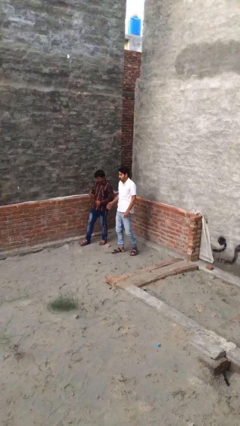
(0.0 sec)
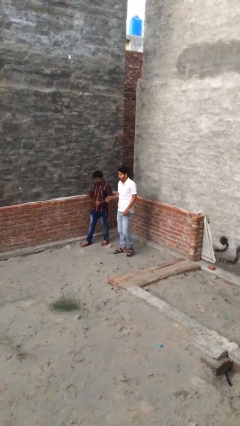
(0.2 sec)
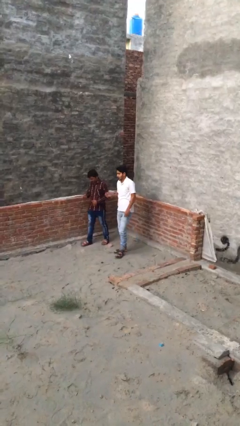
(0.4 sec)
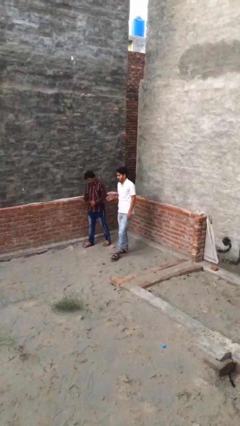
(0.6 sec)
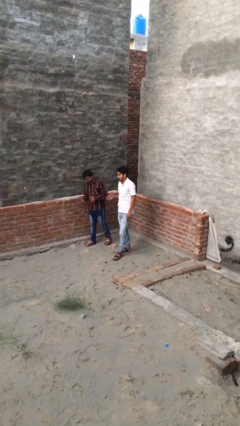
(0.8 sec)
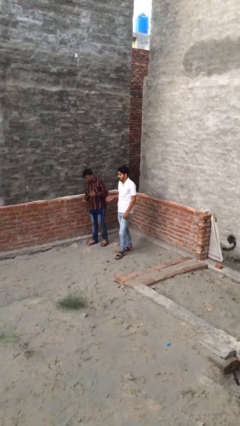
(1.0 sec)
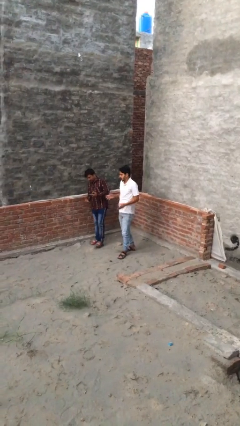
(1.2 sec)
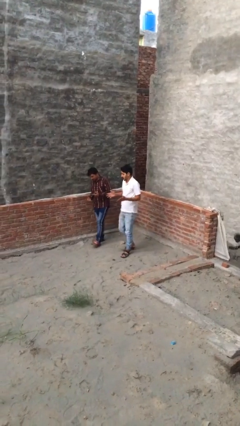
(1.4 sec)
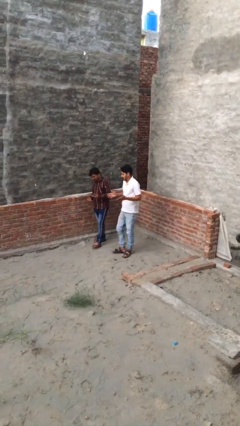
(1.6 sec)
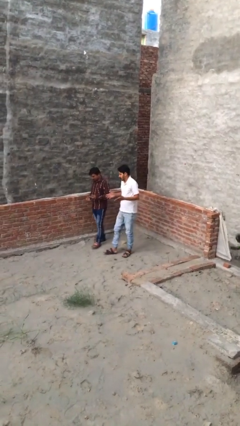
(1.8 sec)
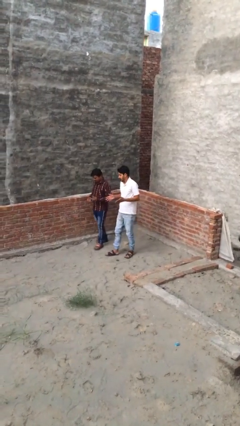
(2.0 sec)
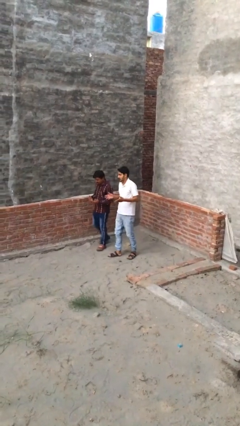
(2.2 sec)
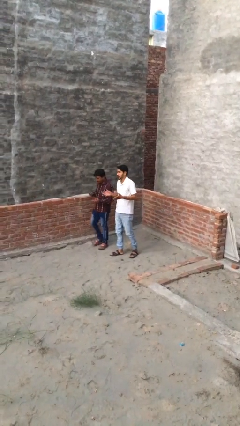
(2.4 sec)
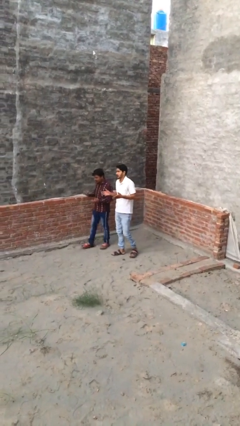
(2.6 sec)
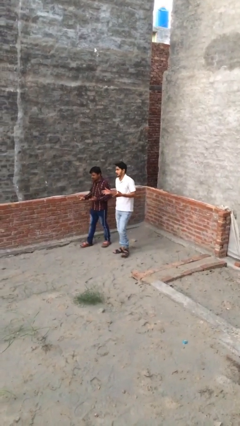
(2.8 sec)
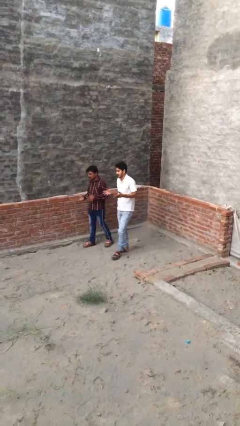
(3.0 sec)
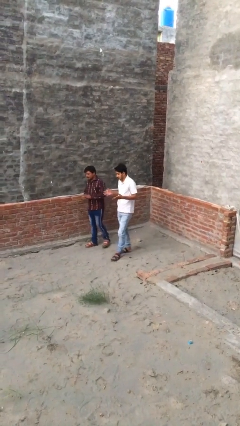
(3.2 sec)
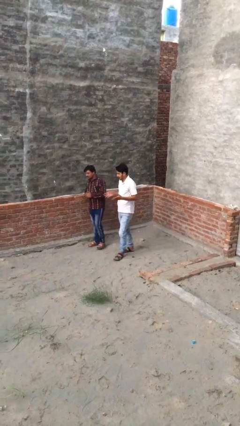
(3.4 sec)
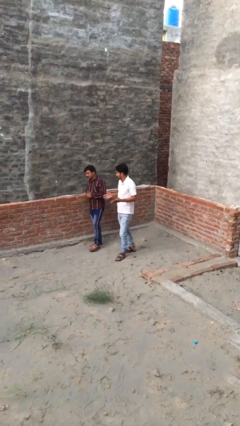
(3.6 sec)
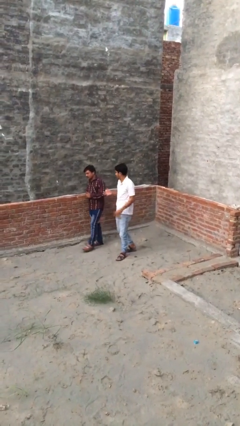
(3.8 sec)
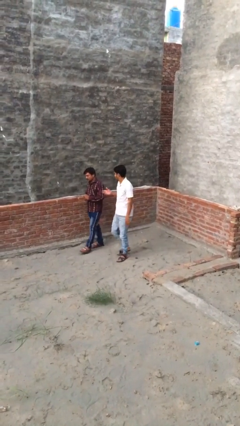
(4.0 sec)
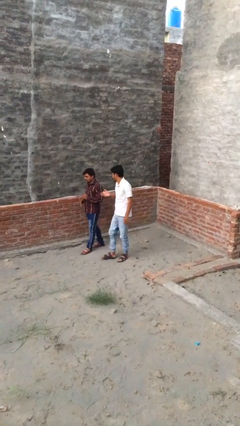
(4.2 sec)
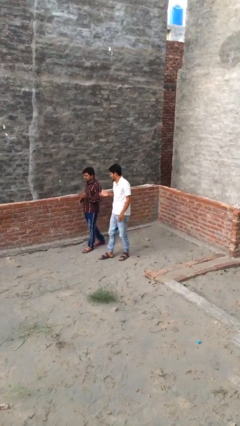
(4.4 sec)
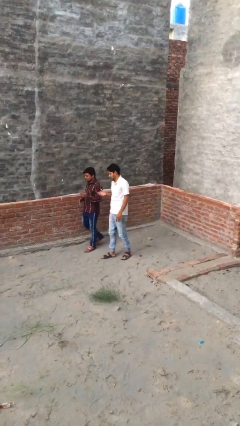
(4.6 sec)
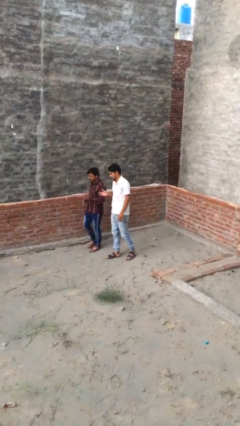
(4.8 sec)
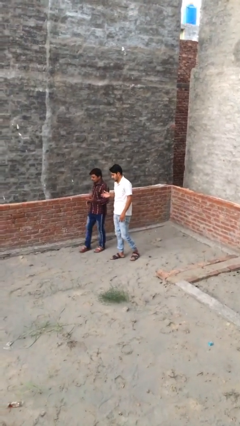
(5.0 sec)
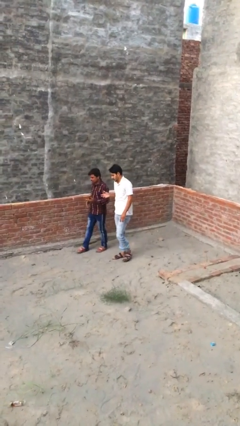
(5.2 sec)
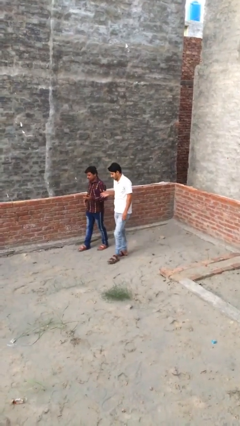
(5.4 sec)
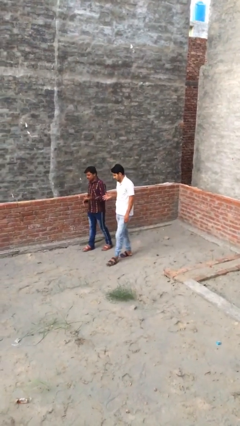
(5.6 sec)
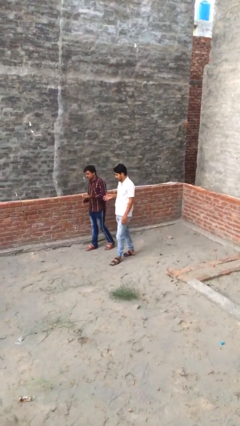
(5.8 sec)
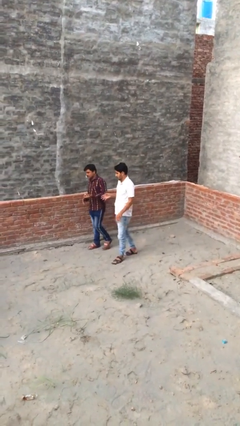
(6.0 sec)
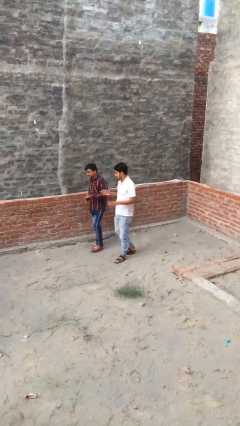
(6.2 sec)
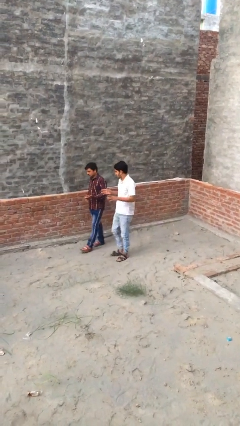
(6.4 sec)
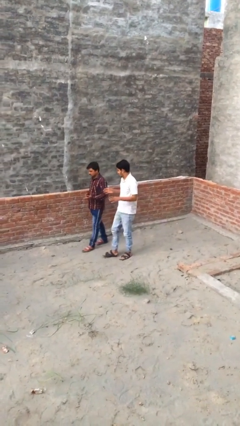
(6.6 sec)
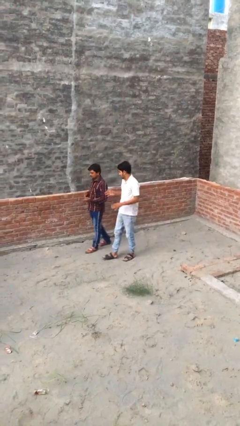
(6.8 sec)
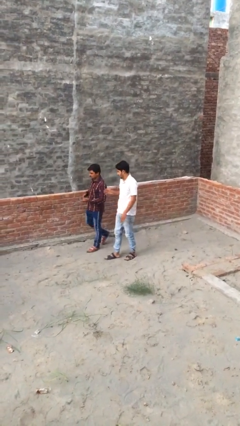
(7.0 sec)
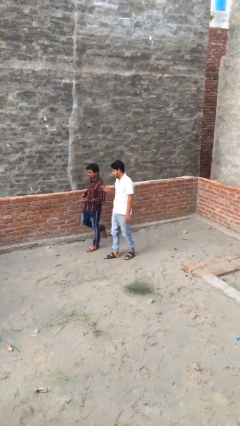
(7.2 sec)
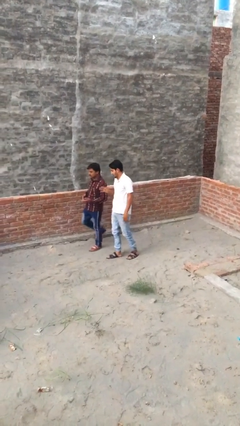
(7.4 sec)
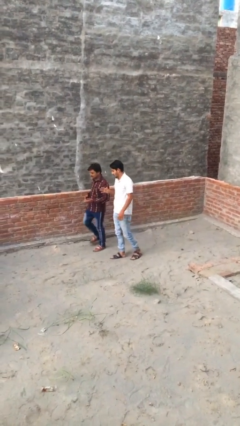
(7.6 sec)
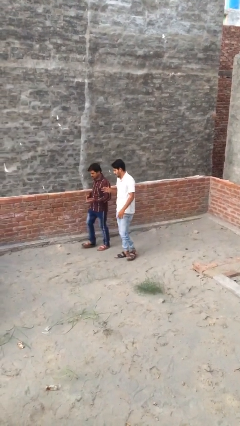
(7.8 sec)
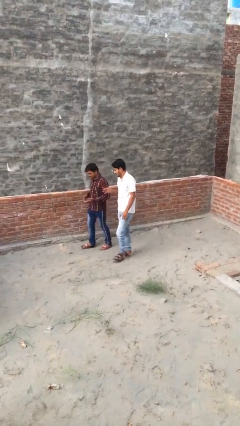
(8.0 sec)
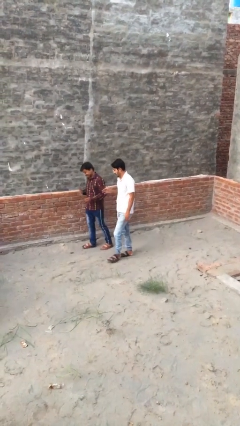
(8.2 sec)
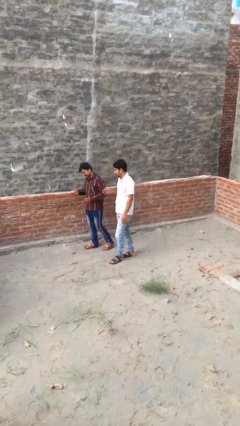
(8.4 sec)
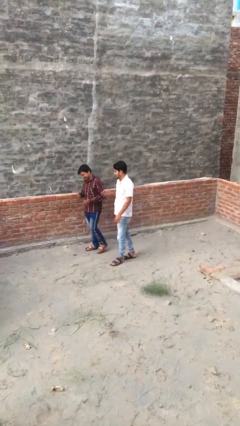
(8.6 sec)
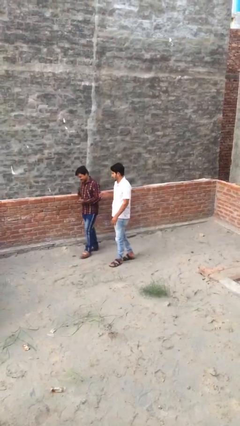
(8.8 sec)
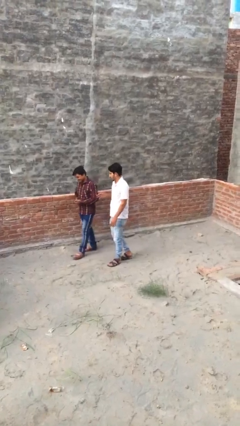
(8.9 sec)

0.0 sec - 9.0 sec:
person talks to person

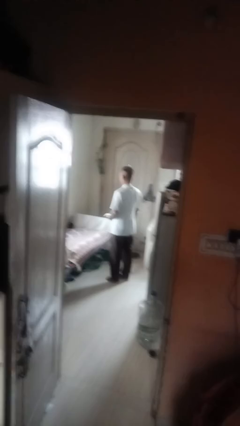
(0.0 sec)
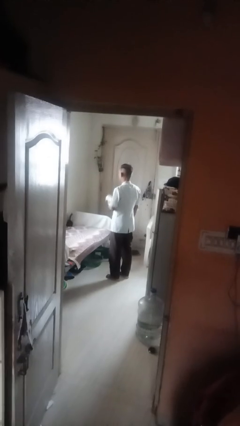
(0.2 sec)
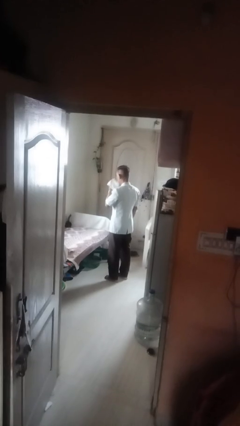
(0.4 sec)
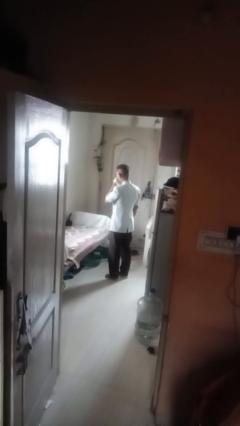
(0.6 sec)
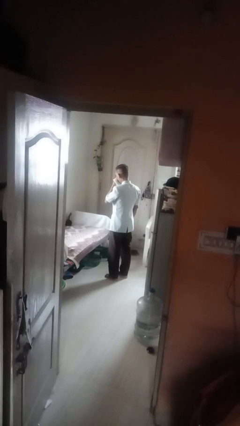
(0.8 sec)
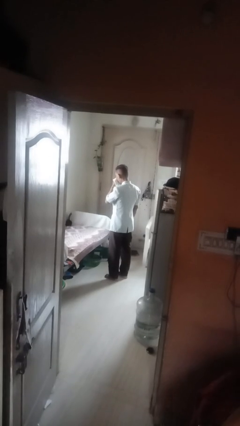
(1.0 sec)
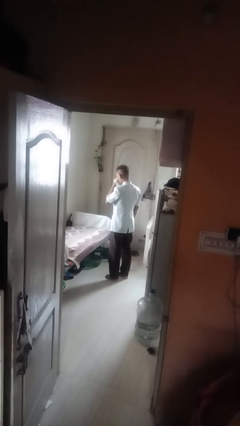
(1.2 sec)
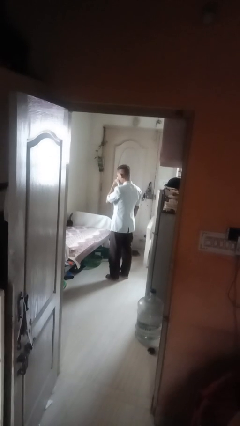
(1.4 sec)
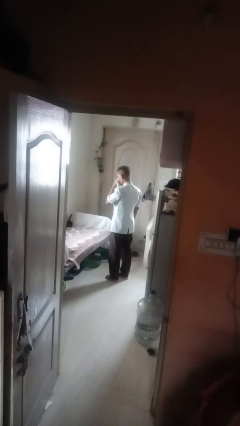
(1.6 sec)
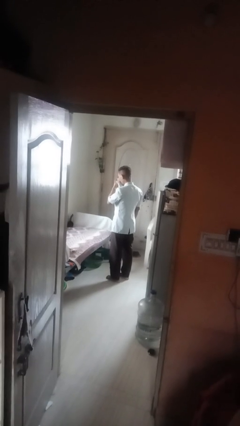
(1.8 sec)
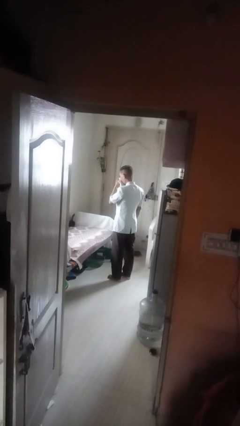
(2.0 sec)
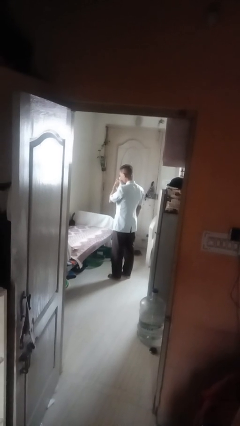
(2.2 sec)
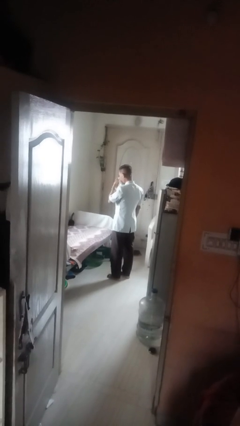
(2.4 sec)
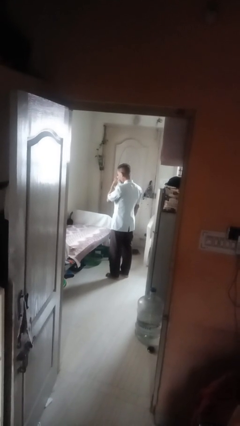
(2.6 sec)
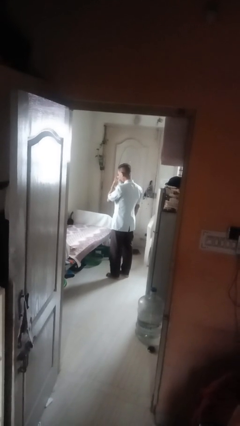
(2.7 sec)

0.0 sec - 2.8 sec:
person blows nose

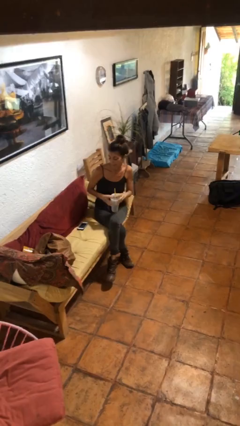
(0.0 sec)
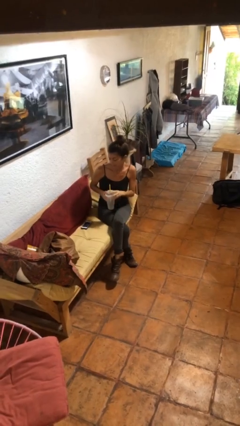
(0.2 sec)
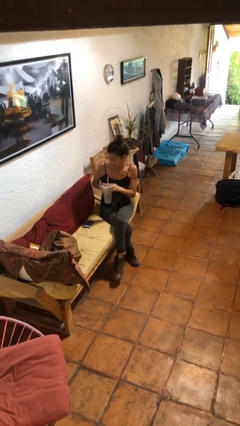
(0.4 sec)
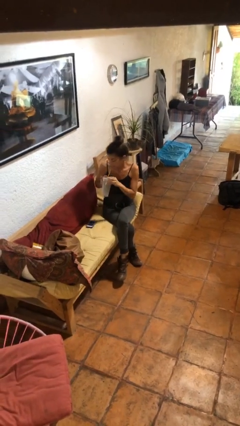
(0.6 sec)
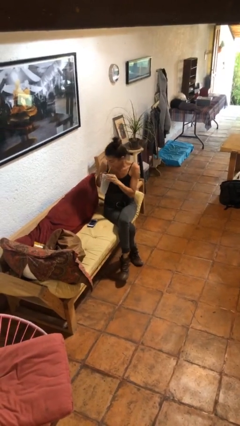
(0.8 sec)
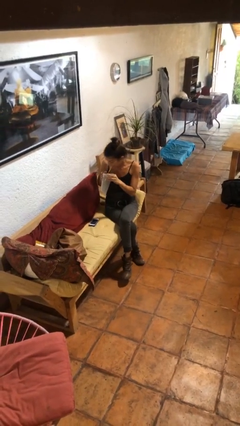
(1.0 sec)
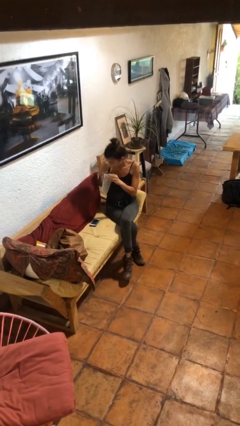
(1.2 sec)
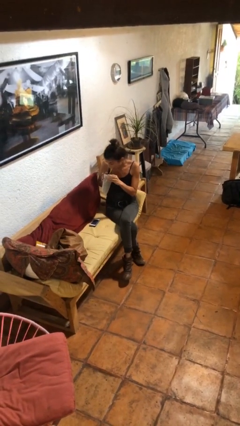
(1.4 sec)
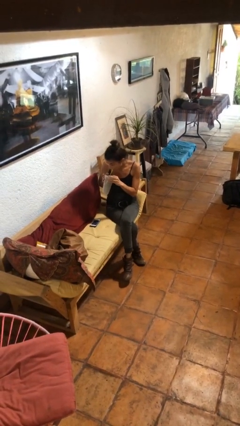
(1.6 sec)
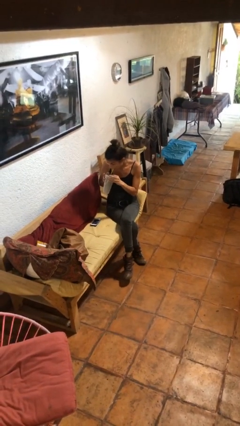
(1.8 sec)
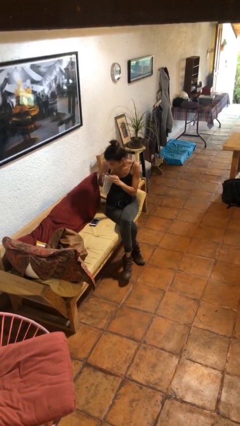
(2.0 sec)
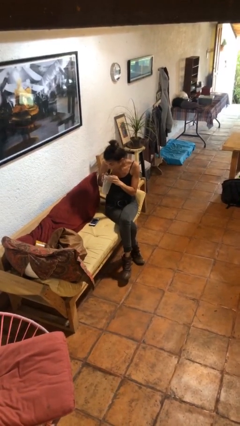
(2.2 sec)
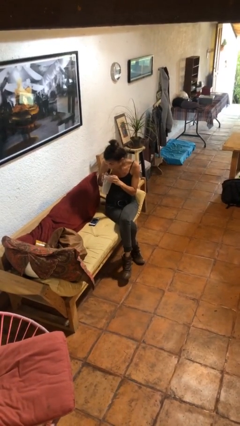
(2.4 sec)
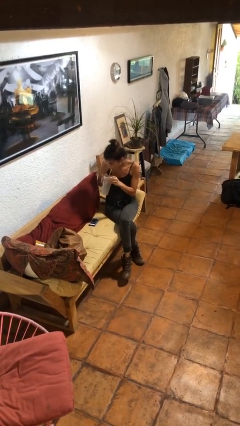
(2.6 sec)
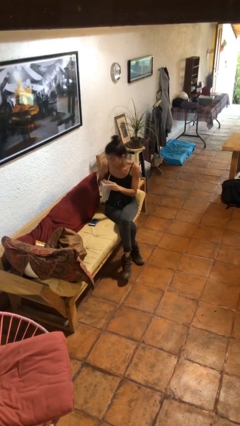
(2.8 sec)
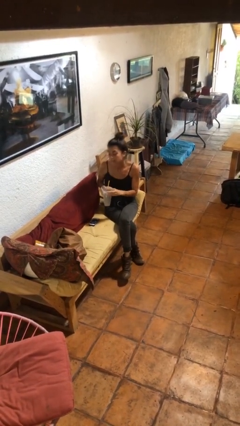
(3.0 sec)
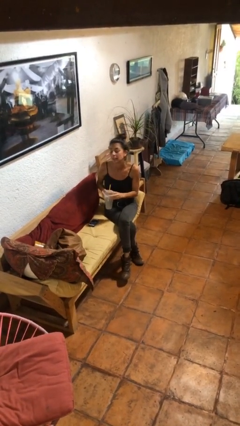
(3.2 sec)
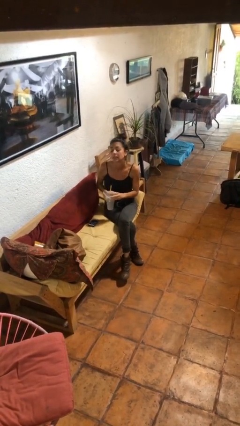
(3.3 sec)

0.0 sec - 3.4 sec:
person drinks from straw

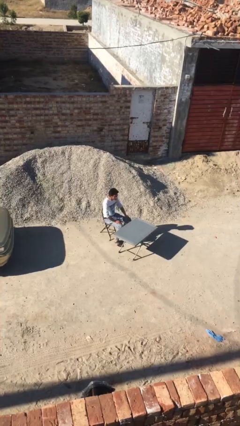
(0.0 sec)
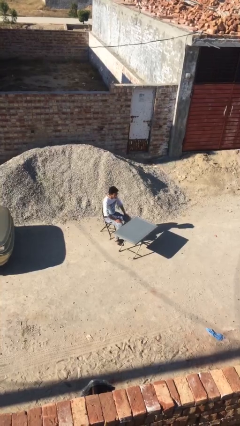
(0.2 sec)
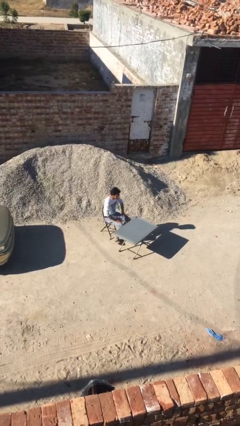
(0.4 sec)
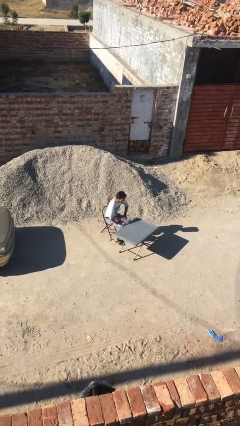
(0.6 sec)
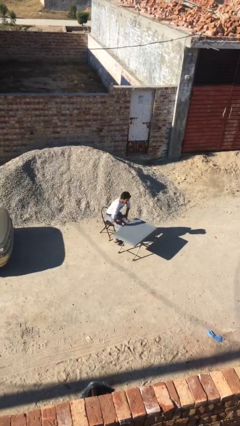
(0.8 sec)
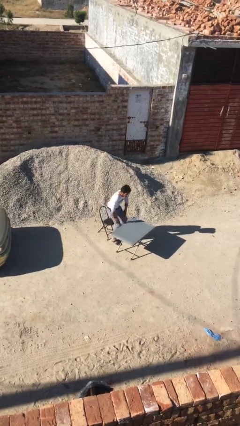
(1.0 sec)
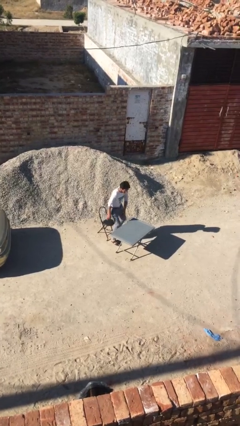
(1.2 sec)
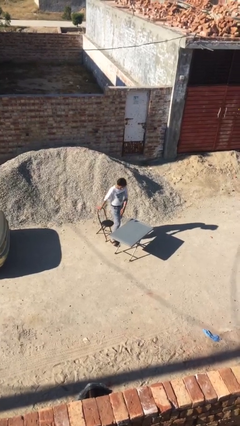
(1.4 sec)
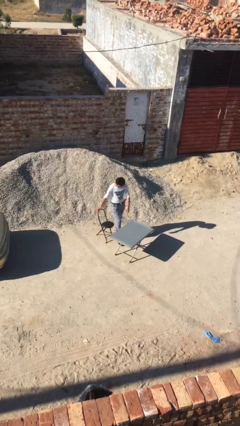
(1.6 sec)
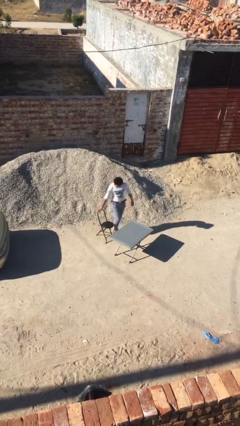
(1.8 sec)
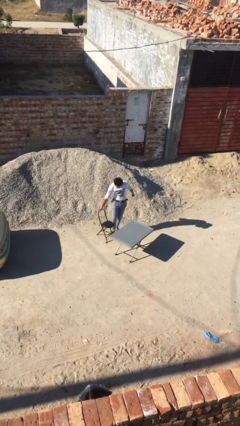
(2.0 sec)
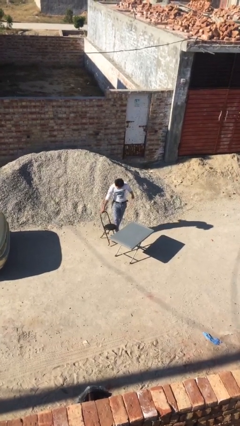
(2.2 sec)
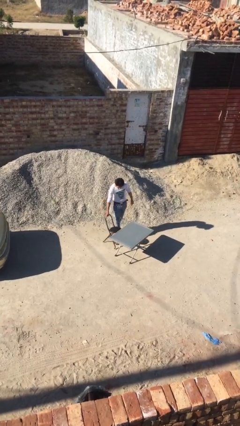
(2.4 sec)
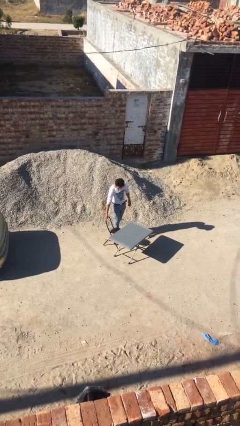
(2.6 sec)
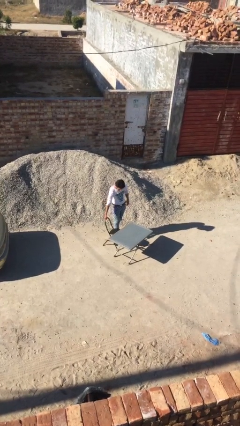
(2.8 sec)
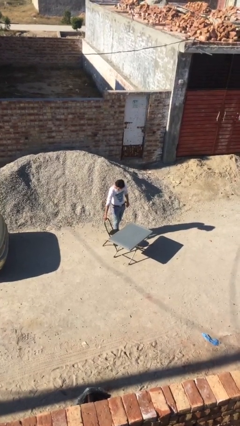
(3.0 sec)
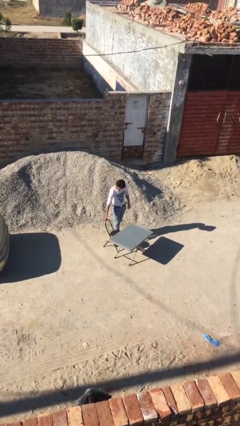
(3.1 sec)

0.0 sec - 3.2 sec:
person stands up
